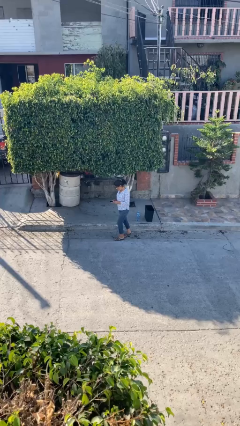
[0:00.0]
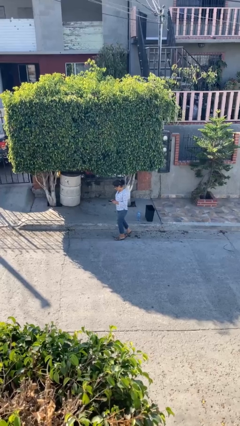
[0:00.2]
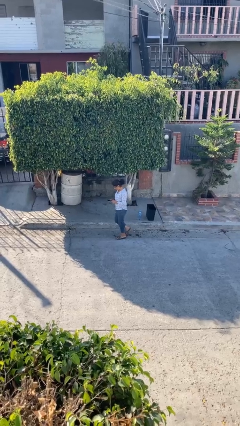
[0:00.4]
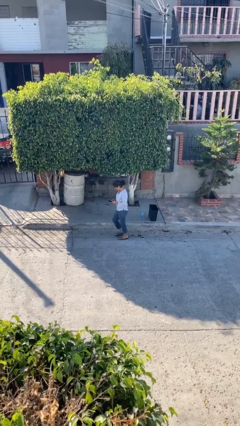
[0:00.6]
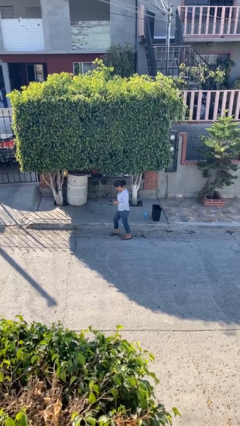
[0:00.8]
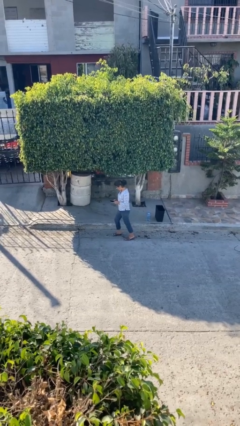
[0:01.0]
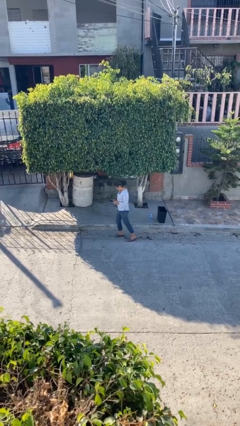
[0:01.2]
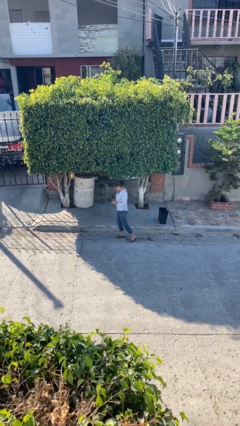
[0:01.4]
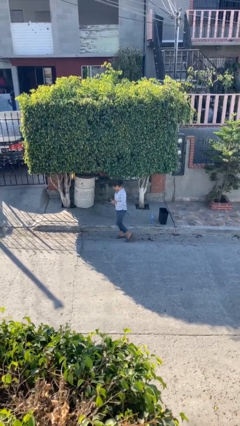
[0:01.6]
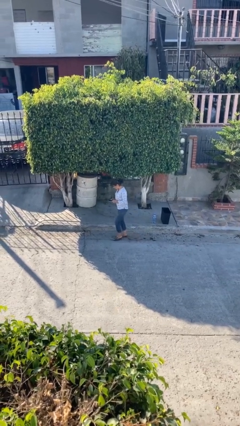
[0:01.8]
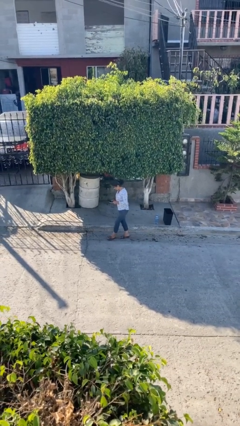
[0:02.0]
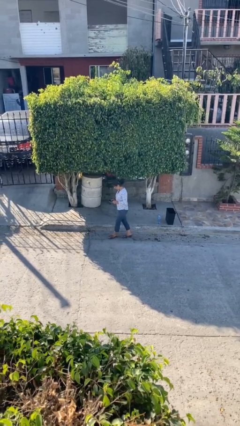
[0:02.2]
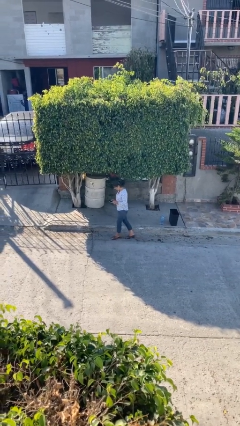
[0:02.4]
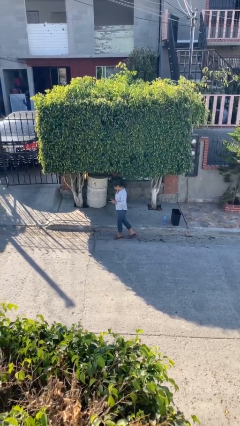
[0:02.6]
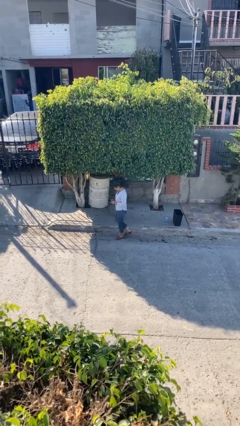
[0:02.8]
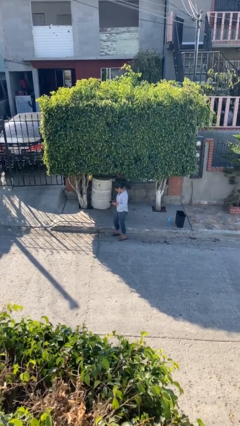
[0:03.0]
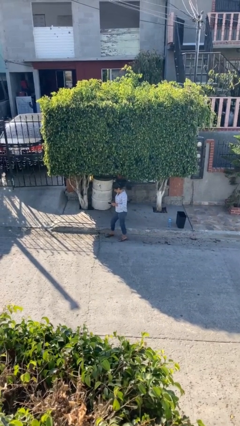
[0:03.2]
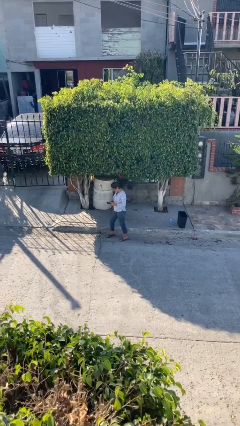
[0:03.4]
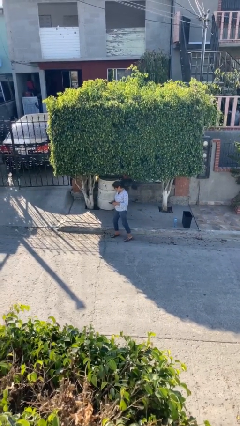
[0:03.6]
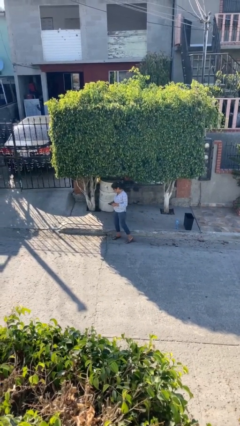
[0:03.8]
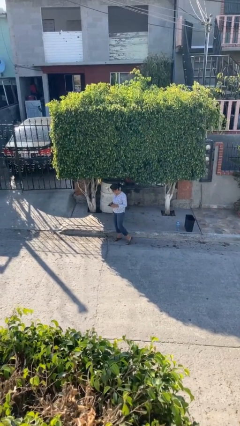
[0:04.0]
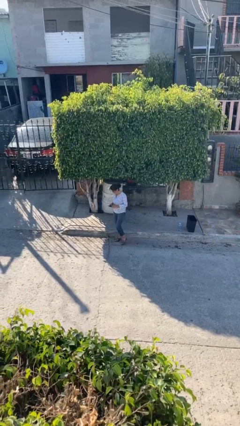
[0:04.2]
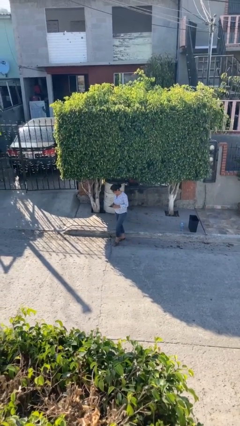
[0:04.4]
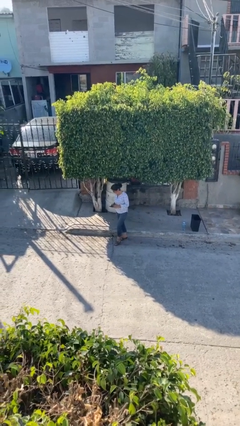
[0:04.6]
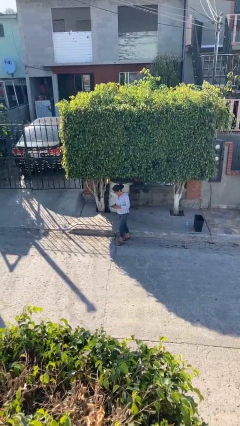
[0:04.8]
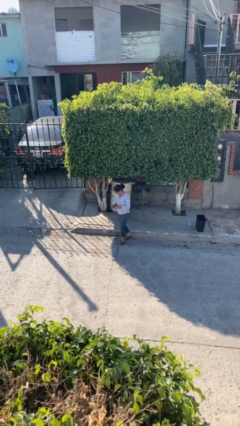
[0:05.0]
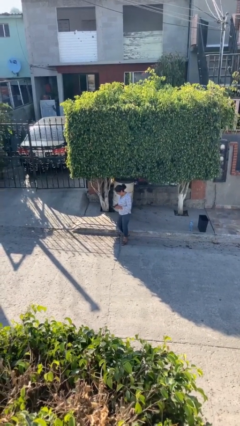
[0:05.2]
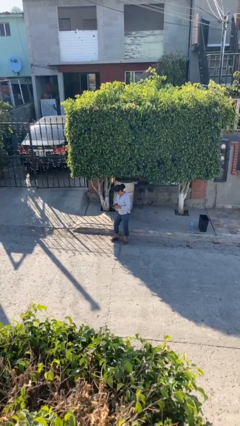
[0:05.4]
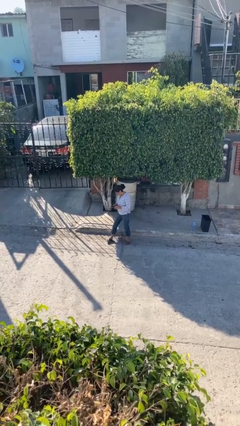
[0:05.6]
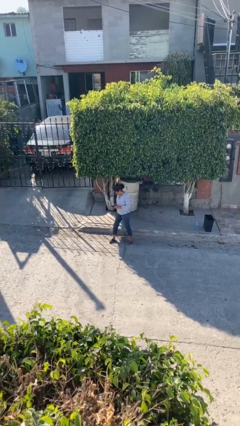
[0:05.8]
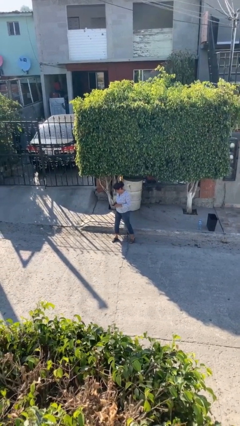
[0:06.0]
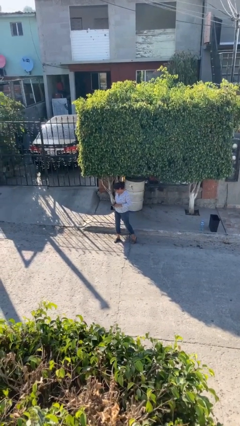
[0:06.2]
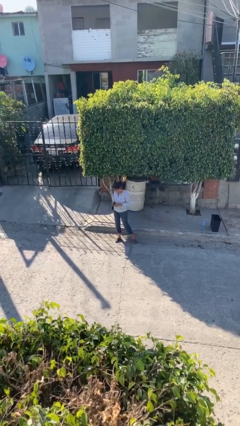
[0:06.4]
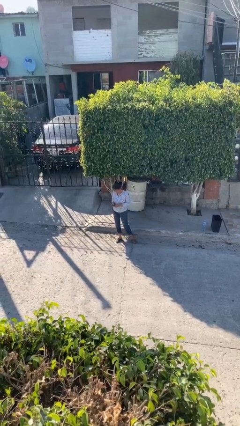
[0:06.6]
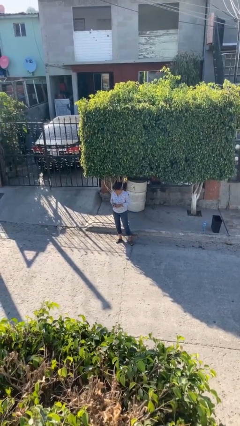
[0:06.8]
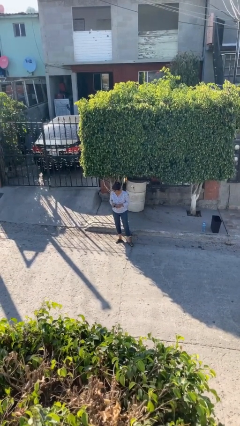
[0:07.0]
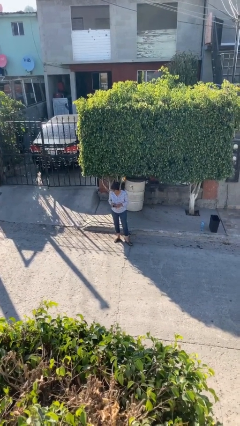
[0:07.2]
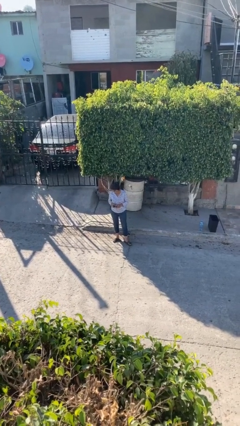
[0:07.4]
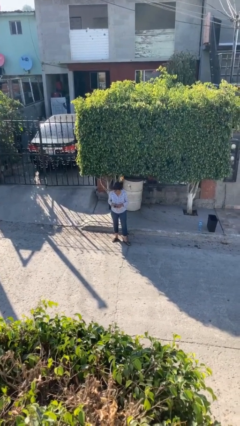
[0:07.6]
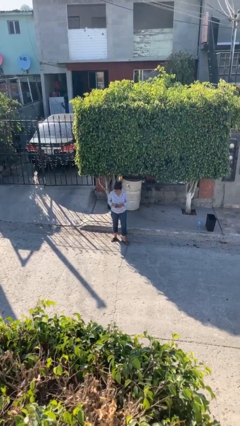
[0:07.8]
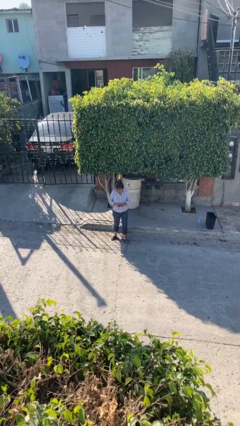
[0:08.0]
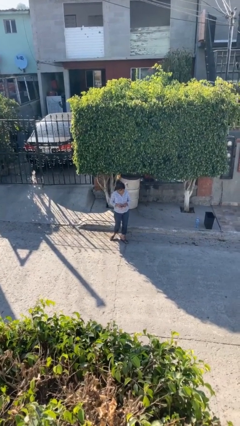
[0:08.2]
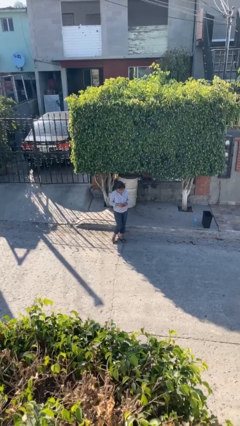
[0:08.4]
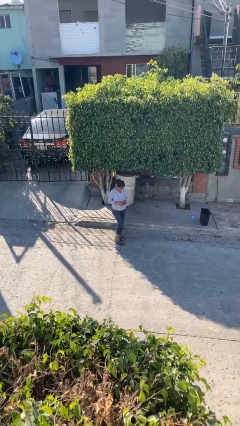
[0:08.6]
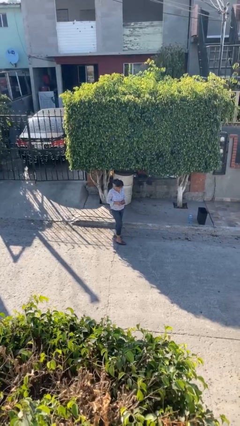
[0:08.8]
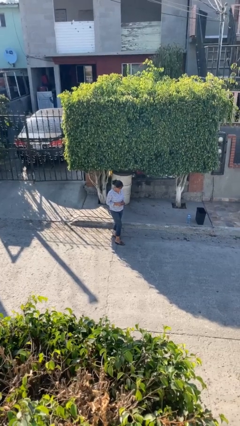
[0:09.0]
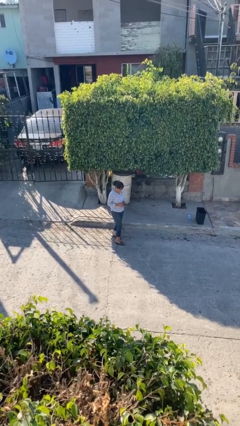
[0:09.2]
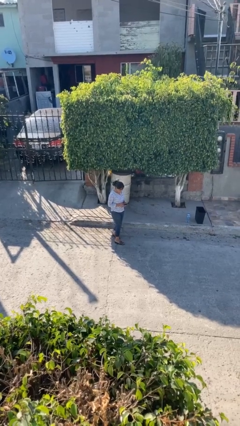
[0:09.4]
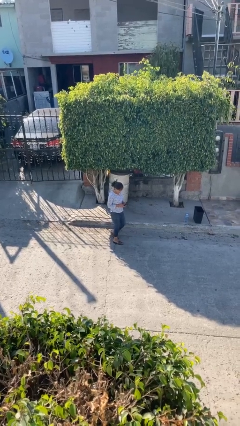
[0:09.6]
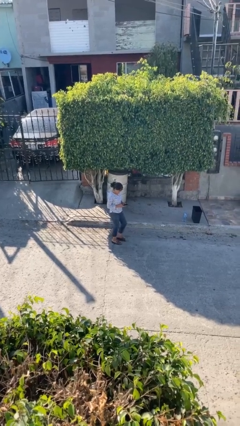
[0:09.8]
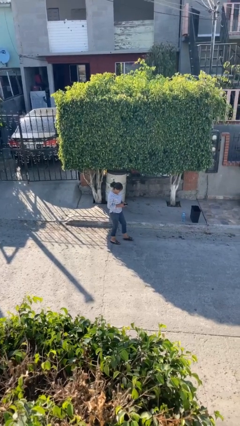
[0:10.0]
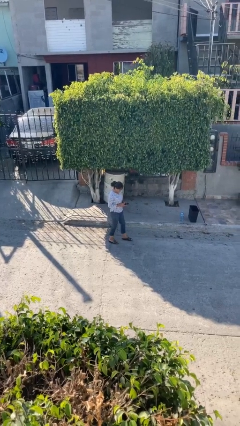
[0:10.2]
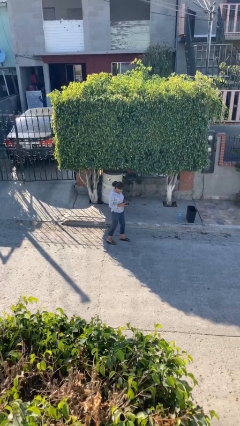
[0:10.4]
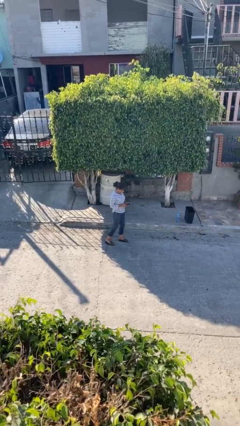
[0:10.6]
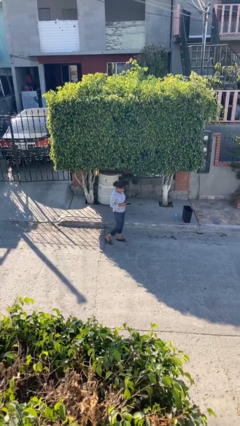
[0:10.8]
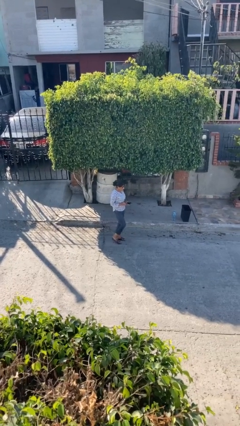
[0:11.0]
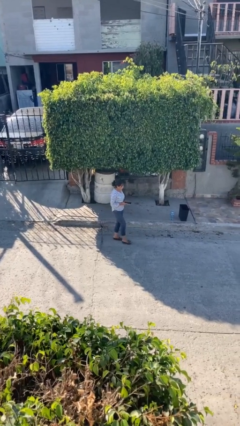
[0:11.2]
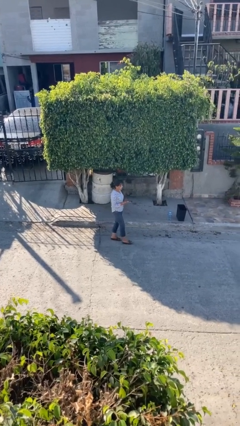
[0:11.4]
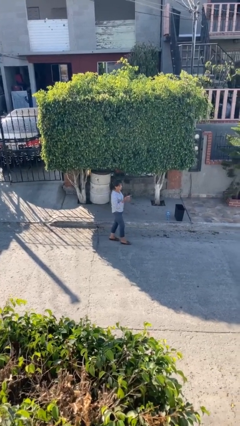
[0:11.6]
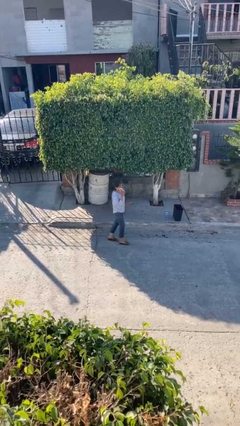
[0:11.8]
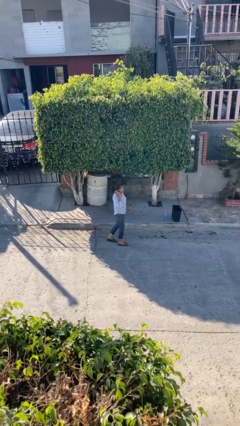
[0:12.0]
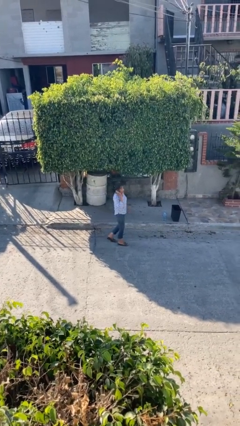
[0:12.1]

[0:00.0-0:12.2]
person texts on phone

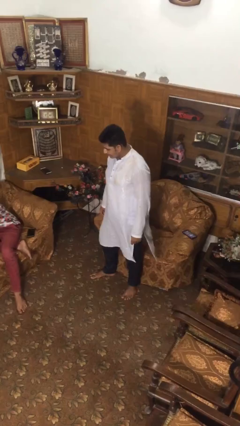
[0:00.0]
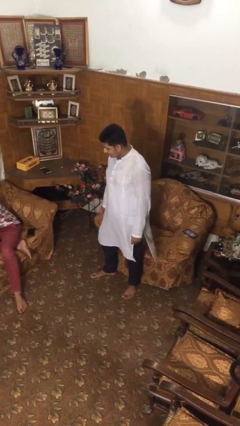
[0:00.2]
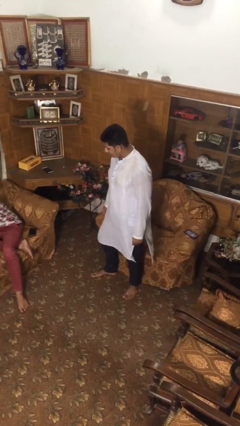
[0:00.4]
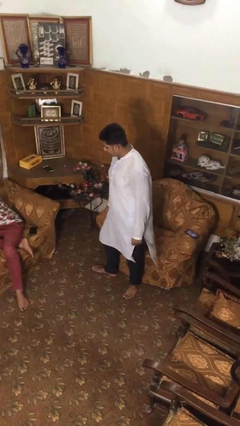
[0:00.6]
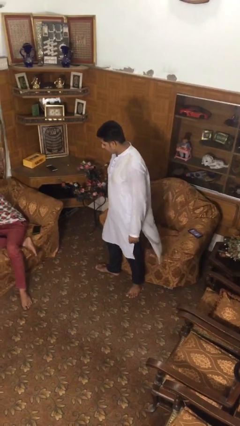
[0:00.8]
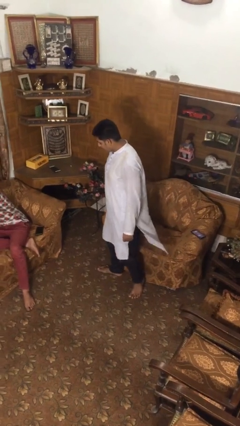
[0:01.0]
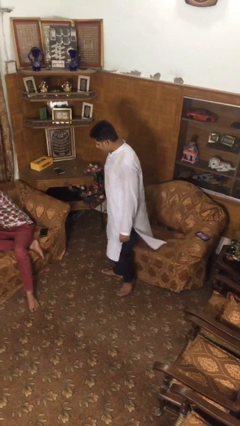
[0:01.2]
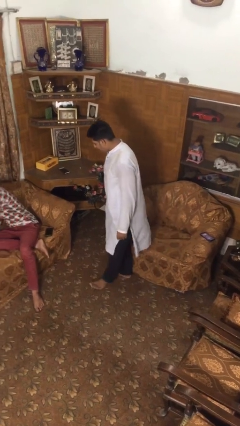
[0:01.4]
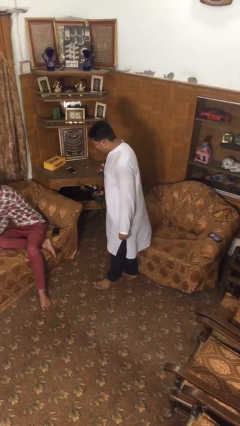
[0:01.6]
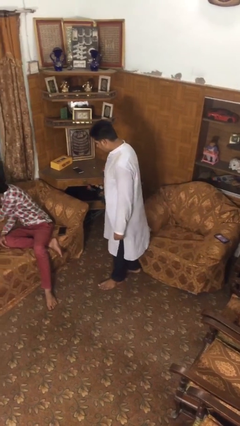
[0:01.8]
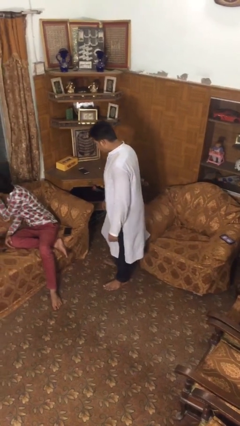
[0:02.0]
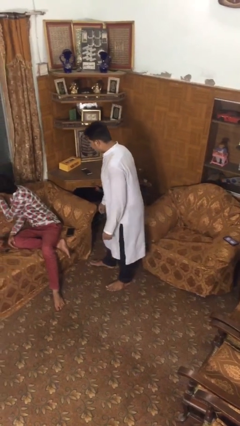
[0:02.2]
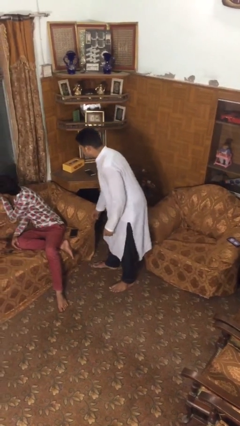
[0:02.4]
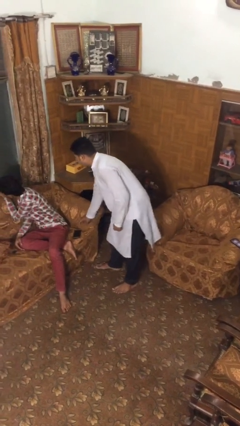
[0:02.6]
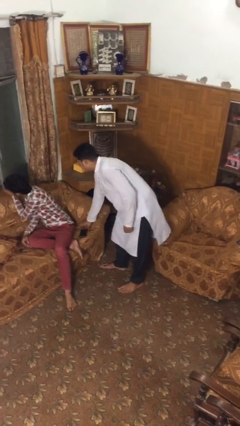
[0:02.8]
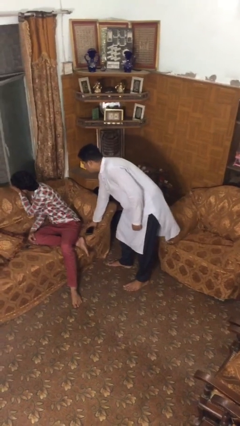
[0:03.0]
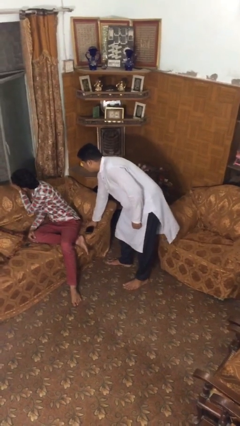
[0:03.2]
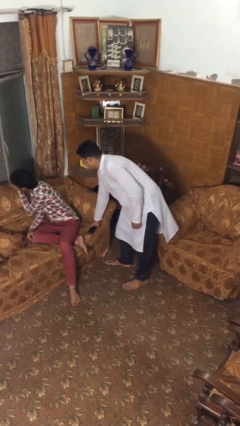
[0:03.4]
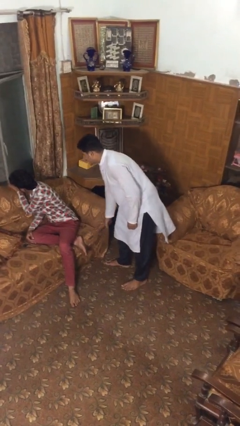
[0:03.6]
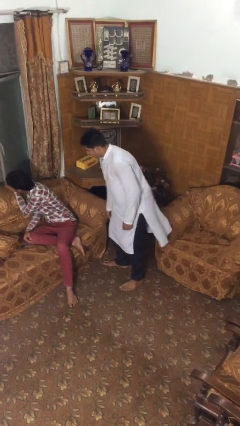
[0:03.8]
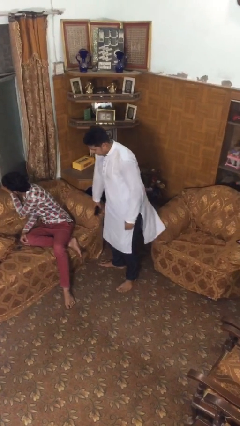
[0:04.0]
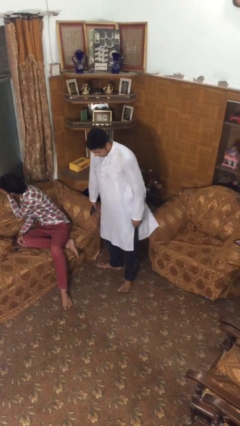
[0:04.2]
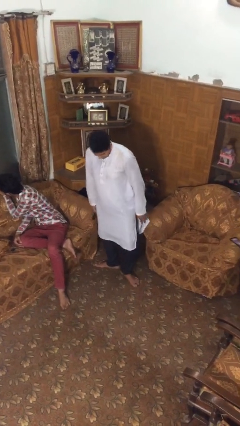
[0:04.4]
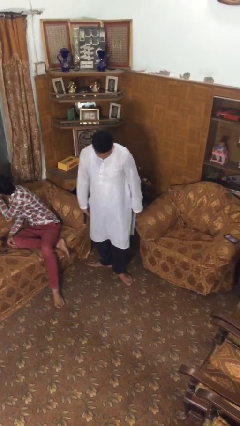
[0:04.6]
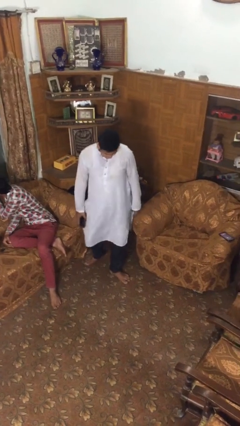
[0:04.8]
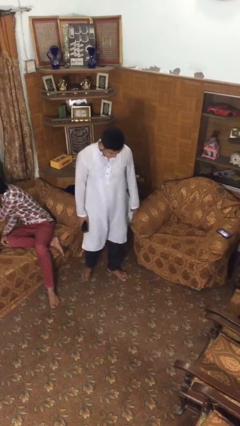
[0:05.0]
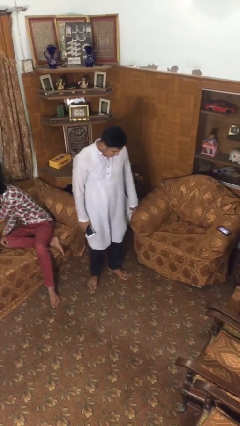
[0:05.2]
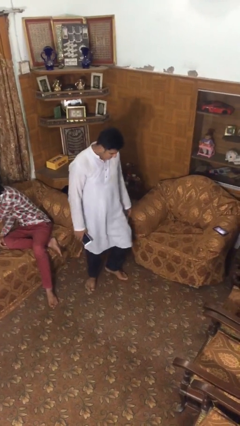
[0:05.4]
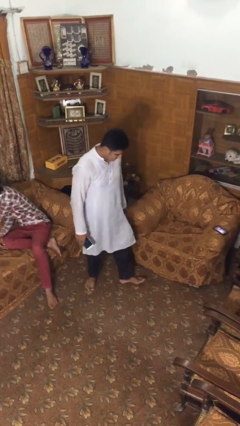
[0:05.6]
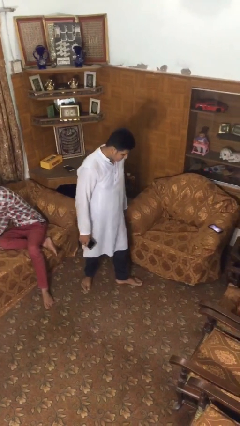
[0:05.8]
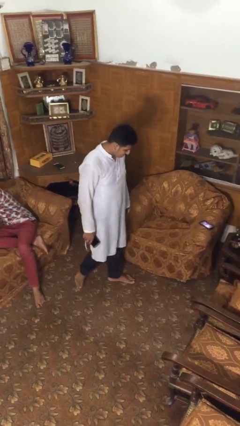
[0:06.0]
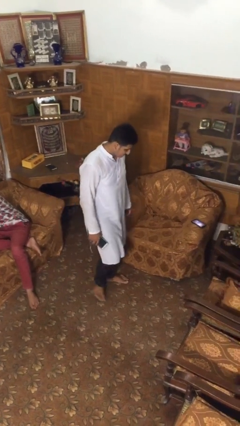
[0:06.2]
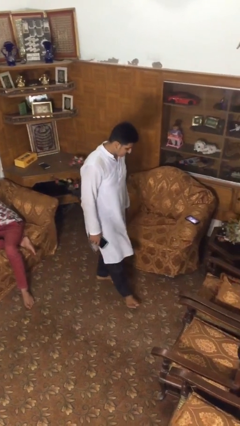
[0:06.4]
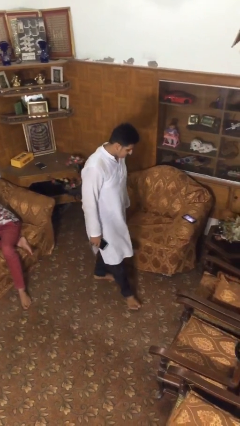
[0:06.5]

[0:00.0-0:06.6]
person steals object from person
